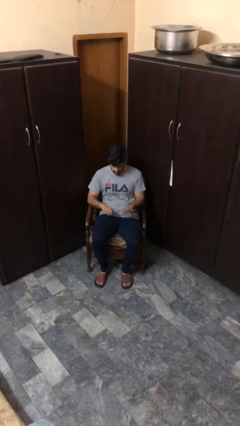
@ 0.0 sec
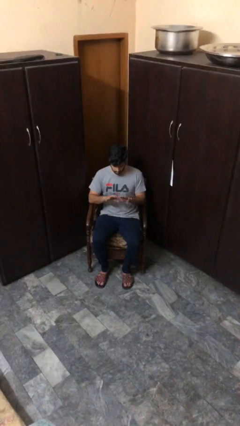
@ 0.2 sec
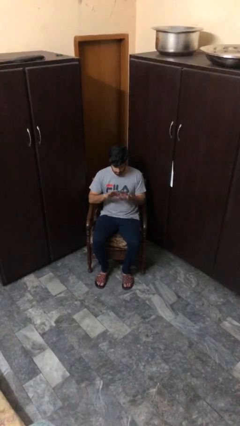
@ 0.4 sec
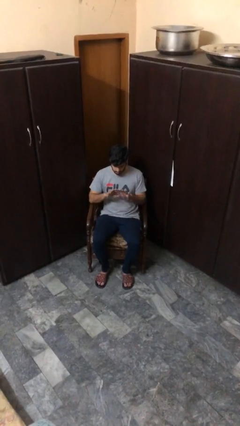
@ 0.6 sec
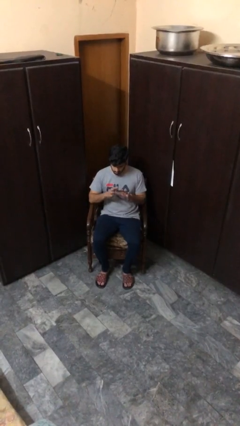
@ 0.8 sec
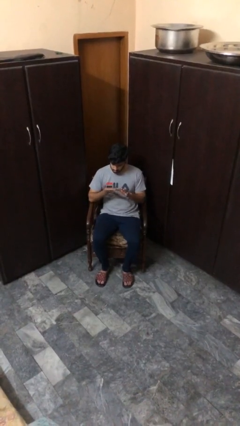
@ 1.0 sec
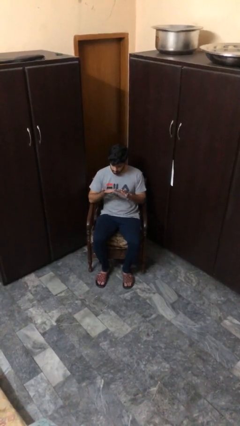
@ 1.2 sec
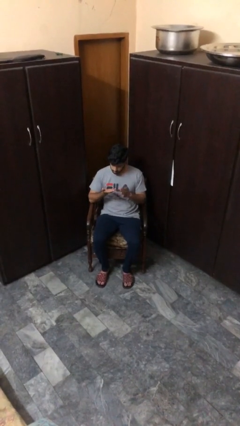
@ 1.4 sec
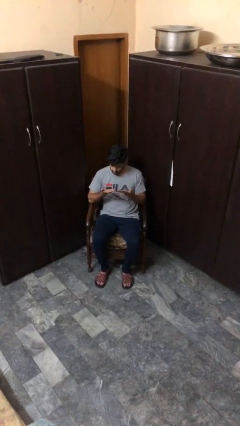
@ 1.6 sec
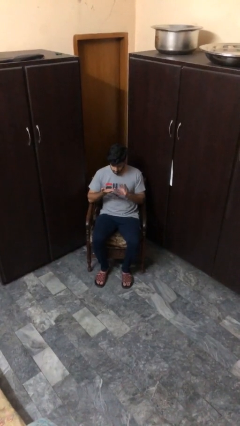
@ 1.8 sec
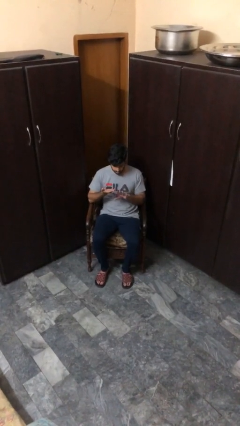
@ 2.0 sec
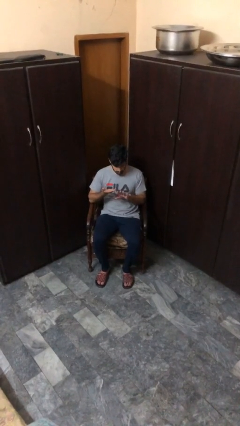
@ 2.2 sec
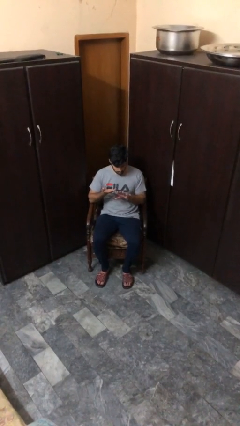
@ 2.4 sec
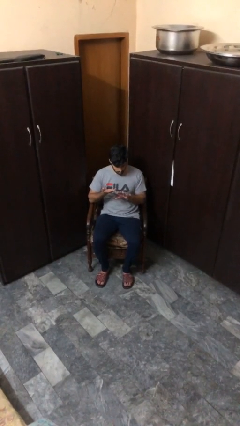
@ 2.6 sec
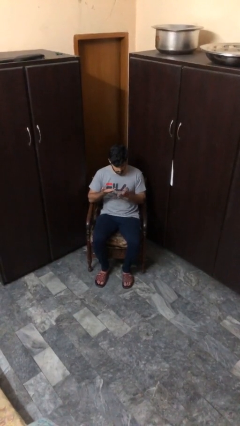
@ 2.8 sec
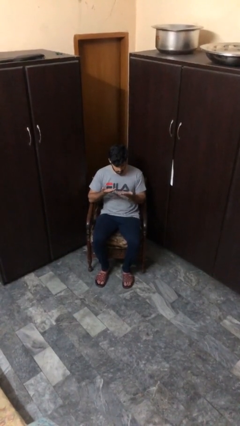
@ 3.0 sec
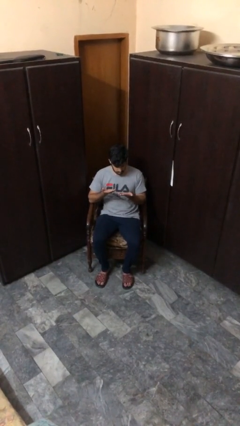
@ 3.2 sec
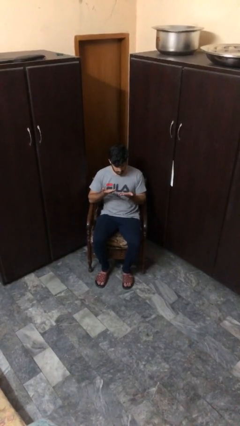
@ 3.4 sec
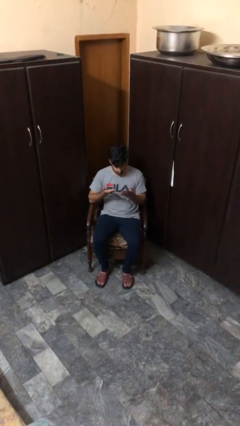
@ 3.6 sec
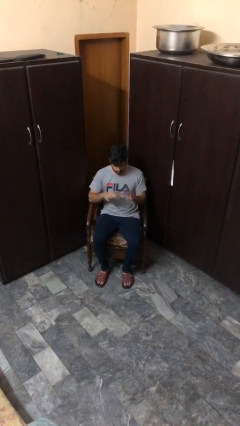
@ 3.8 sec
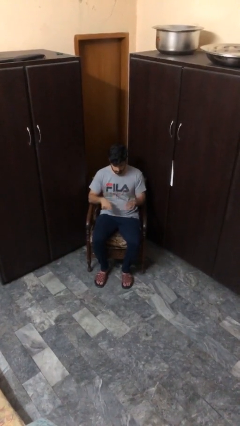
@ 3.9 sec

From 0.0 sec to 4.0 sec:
person looks at hands in lap

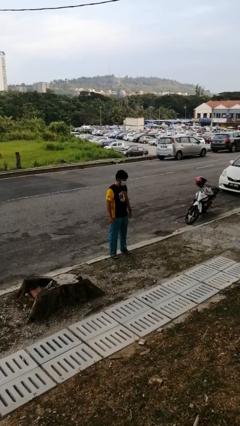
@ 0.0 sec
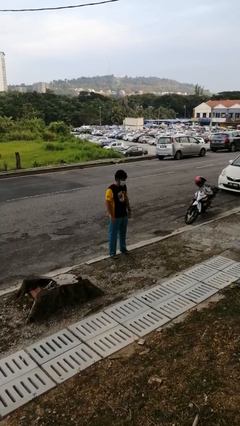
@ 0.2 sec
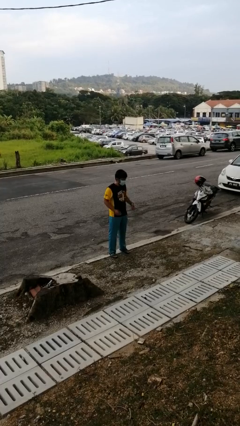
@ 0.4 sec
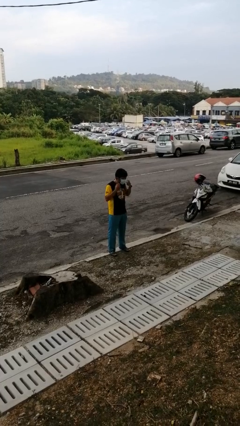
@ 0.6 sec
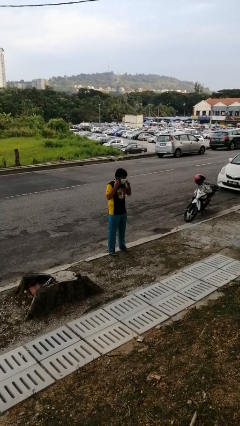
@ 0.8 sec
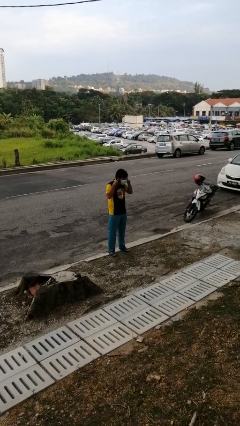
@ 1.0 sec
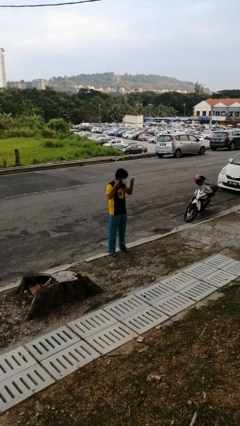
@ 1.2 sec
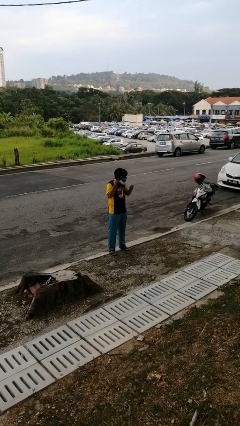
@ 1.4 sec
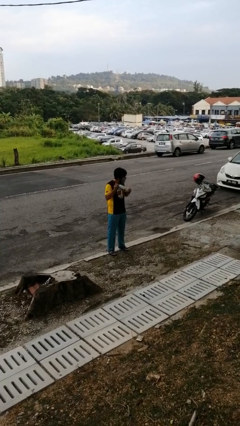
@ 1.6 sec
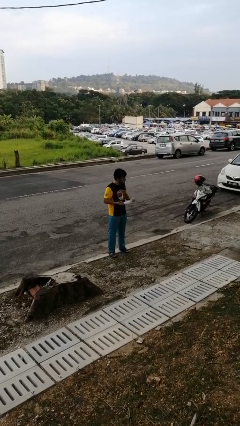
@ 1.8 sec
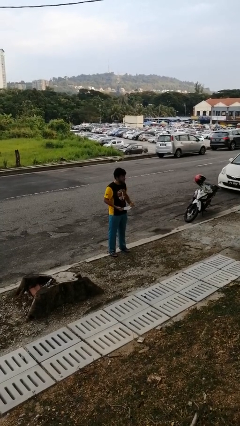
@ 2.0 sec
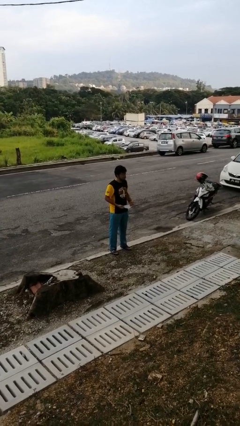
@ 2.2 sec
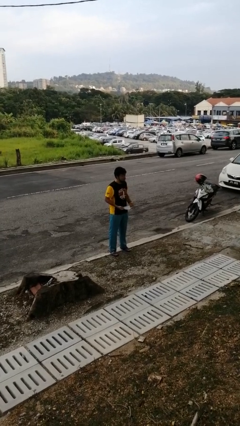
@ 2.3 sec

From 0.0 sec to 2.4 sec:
person takes off facemask

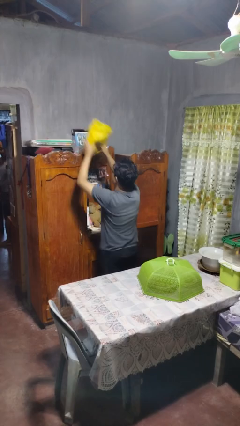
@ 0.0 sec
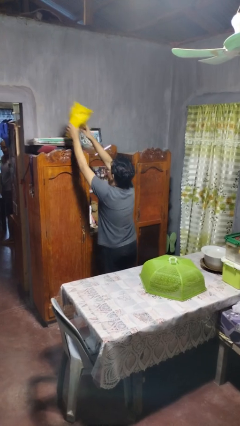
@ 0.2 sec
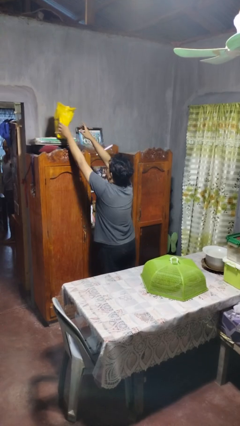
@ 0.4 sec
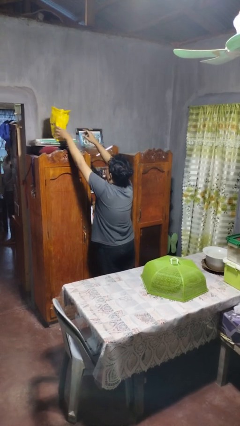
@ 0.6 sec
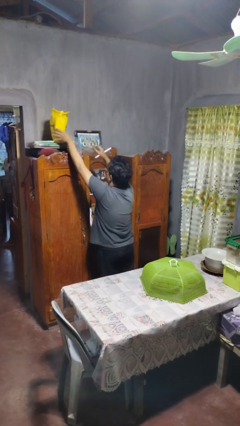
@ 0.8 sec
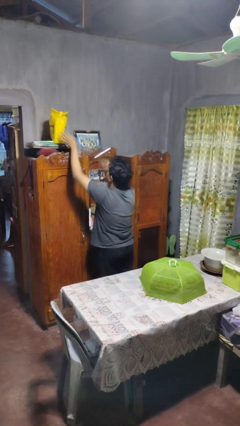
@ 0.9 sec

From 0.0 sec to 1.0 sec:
person puts down object on shelf

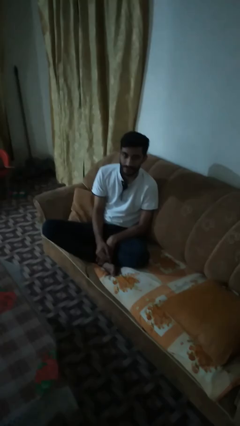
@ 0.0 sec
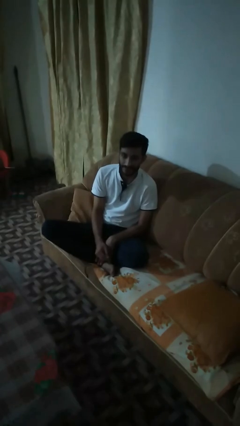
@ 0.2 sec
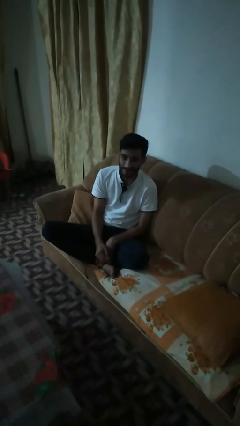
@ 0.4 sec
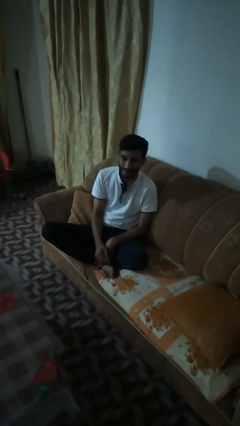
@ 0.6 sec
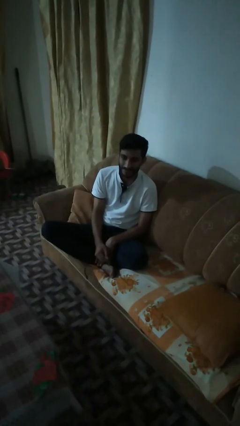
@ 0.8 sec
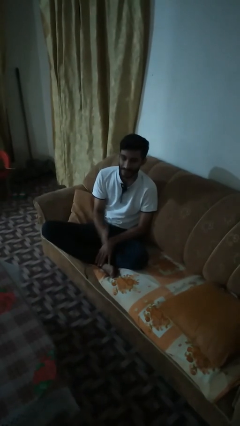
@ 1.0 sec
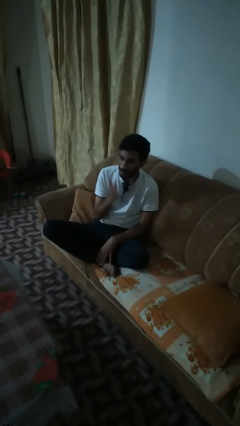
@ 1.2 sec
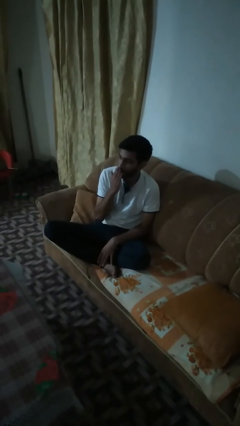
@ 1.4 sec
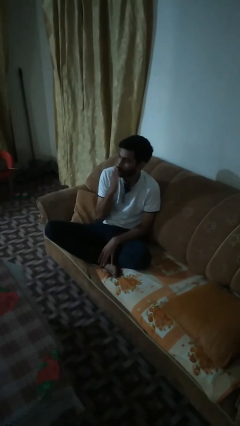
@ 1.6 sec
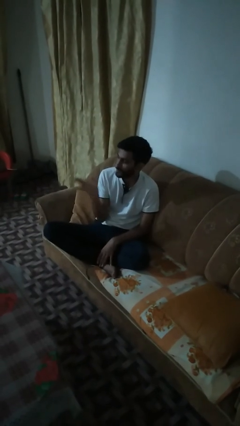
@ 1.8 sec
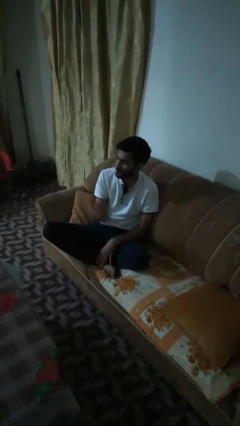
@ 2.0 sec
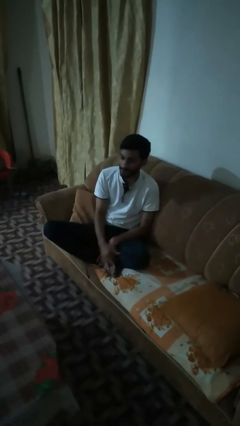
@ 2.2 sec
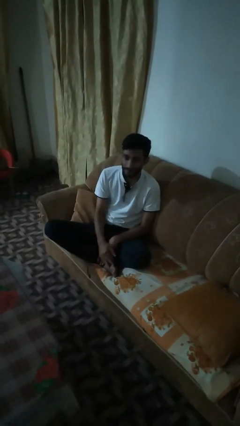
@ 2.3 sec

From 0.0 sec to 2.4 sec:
person gestures blow kiss

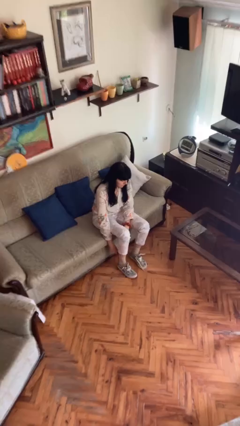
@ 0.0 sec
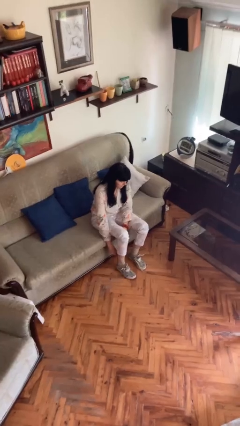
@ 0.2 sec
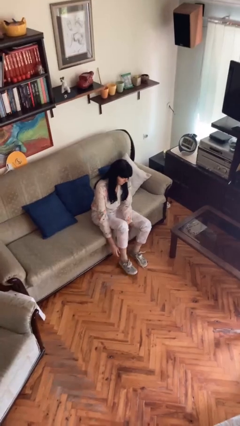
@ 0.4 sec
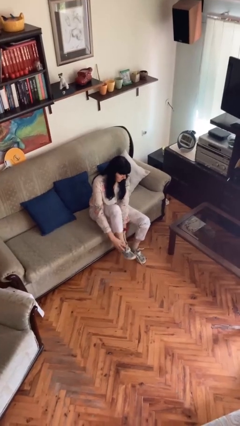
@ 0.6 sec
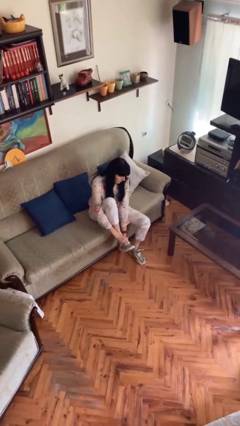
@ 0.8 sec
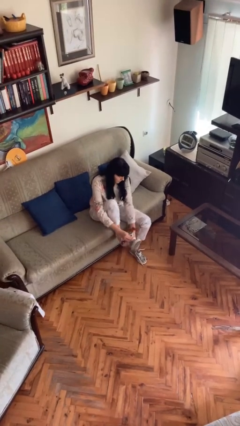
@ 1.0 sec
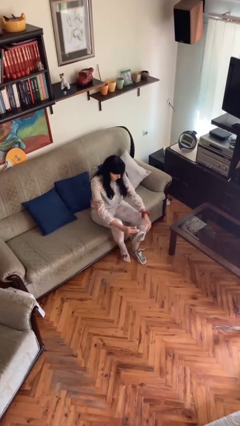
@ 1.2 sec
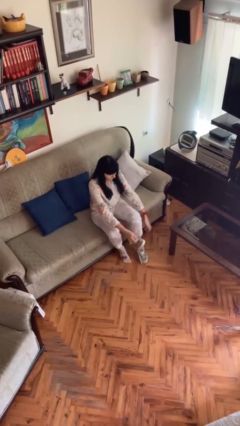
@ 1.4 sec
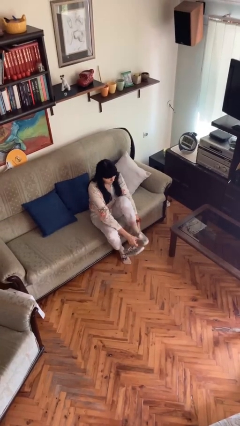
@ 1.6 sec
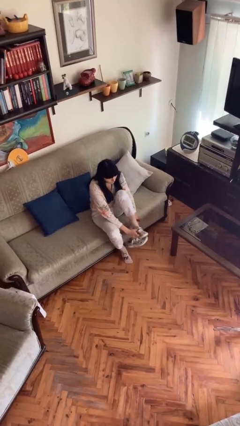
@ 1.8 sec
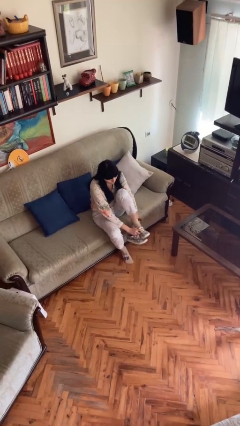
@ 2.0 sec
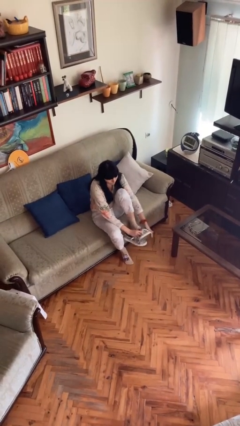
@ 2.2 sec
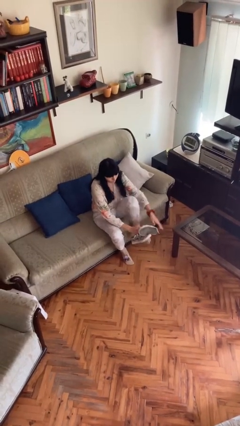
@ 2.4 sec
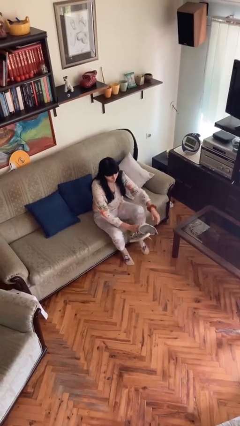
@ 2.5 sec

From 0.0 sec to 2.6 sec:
person takes off shoes

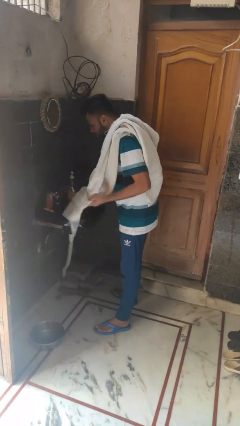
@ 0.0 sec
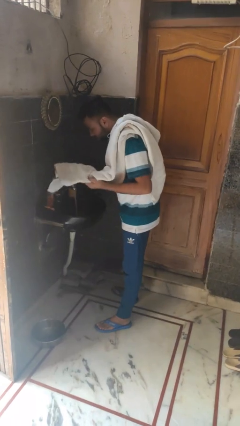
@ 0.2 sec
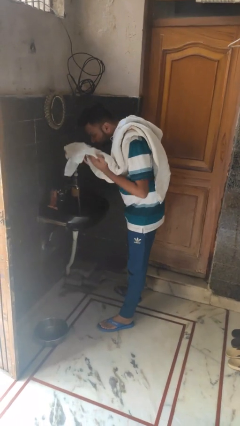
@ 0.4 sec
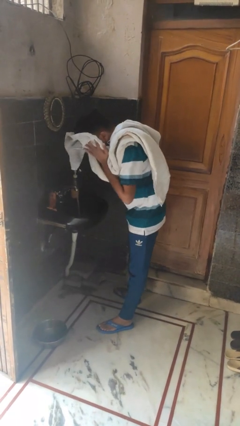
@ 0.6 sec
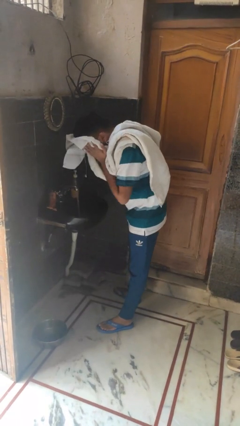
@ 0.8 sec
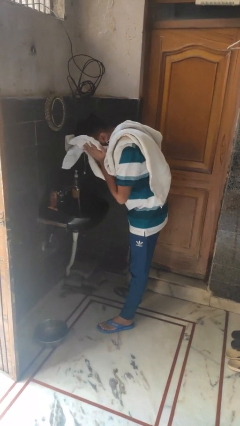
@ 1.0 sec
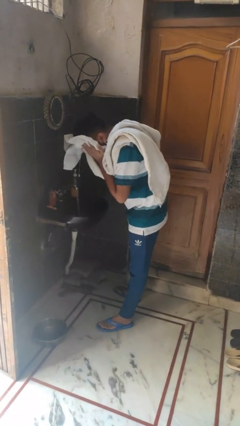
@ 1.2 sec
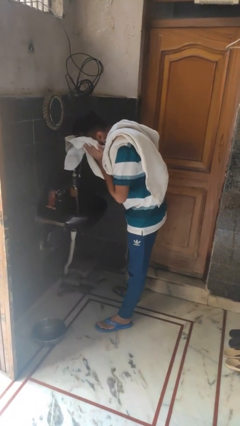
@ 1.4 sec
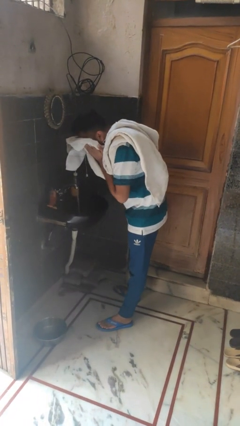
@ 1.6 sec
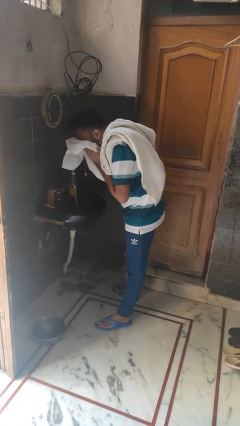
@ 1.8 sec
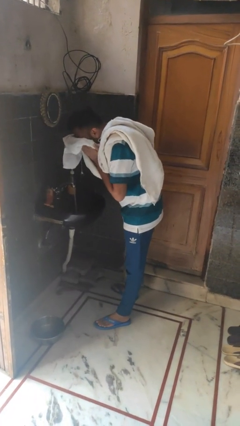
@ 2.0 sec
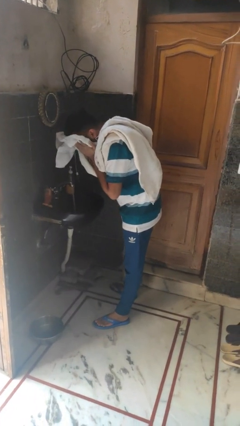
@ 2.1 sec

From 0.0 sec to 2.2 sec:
person dries face with towel

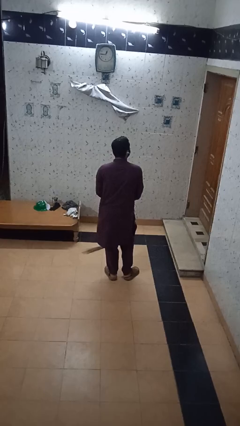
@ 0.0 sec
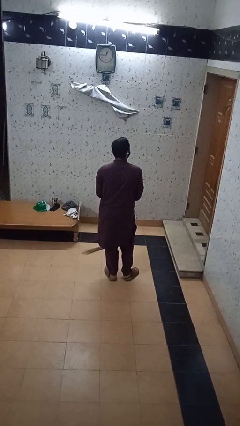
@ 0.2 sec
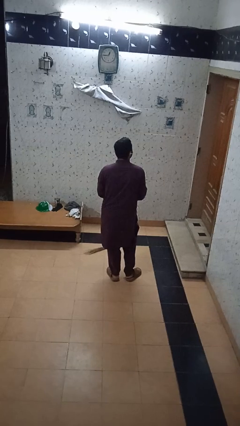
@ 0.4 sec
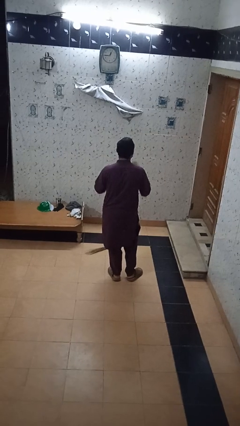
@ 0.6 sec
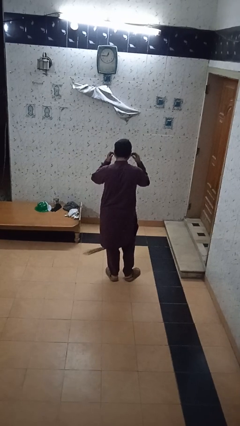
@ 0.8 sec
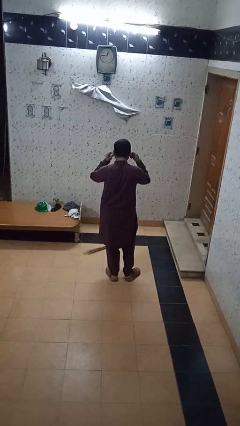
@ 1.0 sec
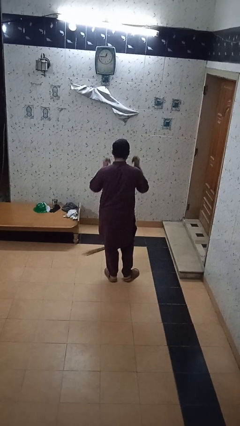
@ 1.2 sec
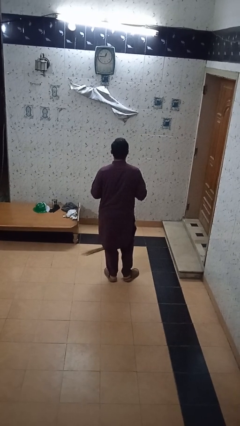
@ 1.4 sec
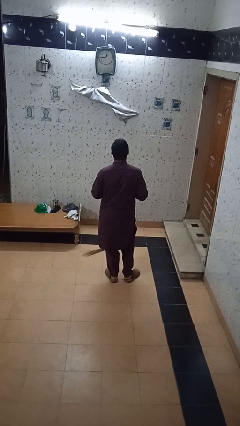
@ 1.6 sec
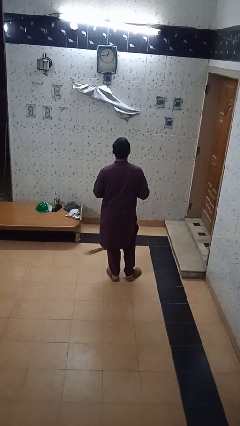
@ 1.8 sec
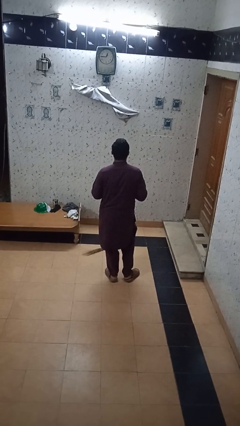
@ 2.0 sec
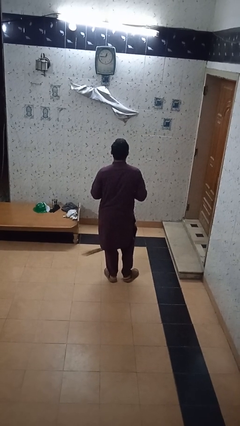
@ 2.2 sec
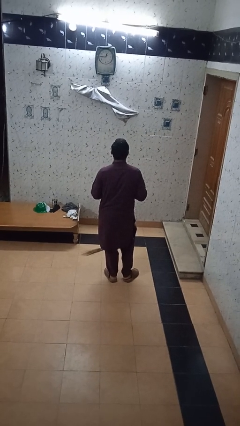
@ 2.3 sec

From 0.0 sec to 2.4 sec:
person takes off headphones
